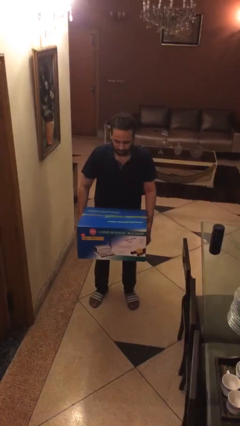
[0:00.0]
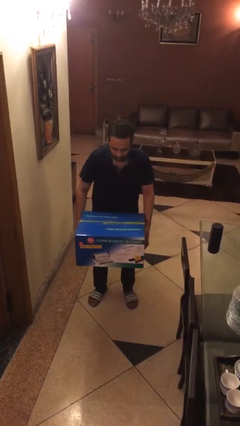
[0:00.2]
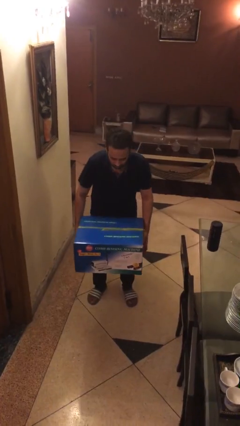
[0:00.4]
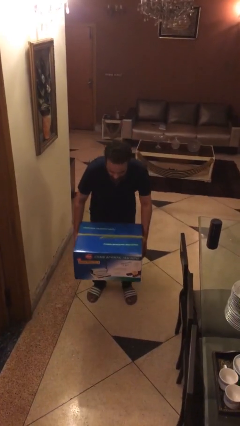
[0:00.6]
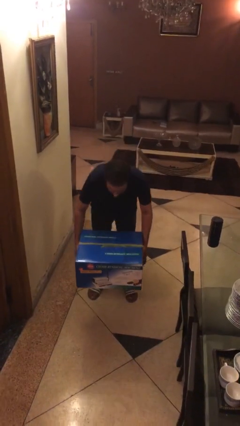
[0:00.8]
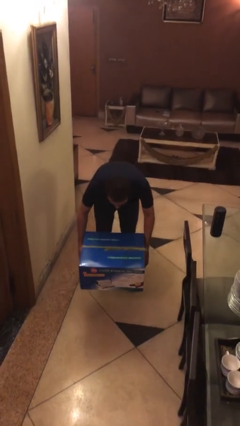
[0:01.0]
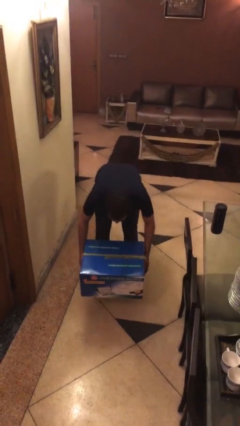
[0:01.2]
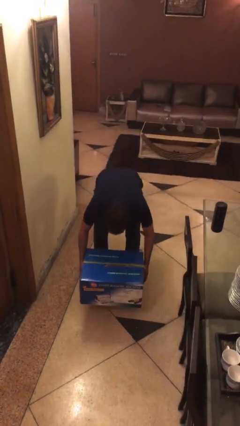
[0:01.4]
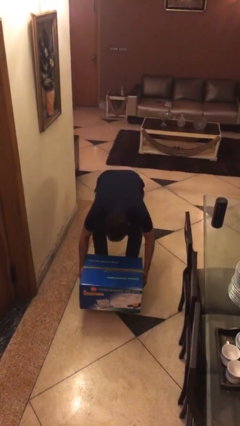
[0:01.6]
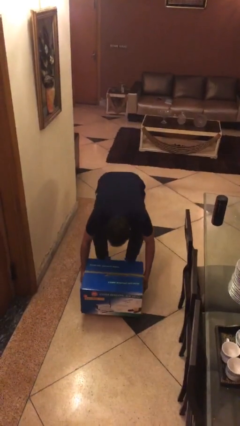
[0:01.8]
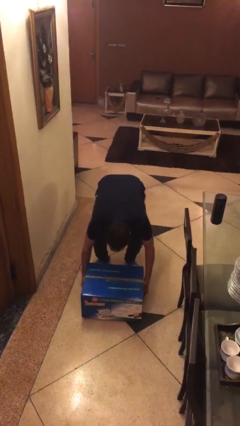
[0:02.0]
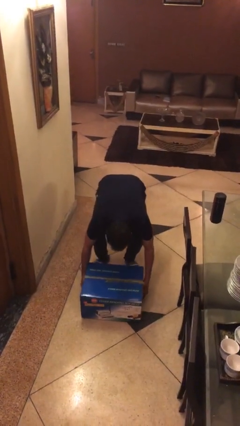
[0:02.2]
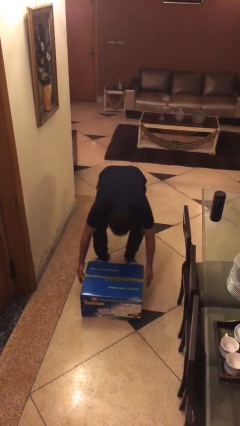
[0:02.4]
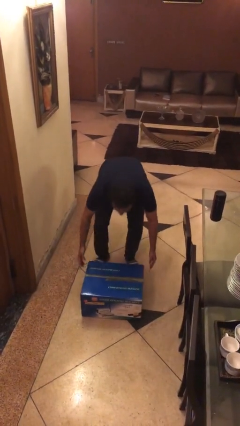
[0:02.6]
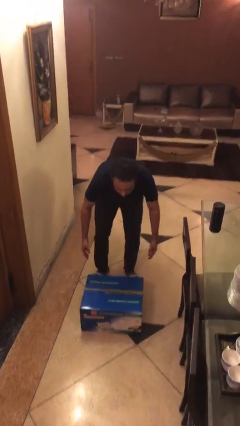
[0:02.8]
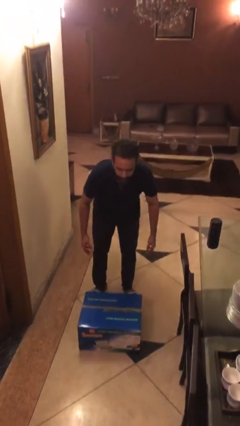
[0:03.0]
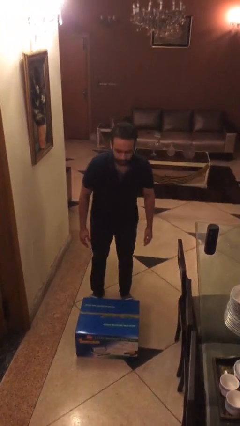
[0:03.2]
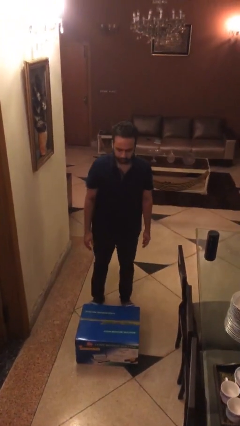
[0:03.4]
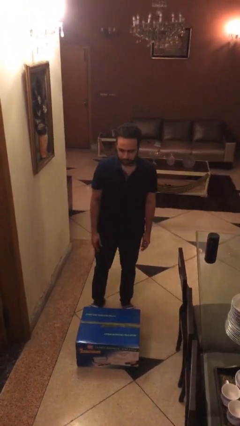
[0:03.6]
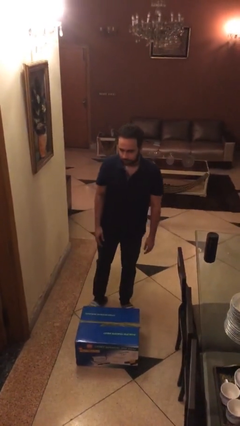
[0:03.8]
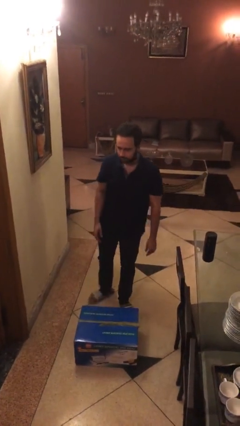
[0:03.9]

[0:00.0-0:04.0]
person puts down object on floor

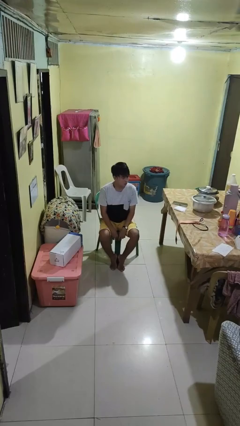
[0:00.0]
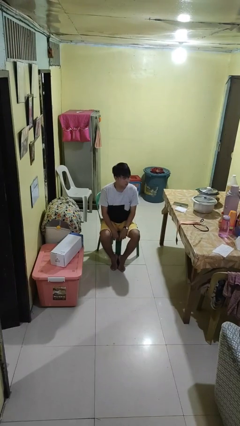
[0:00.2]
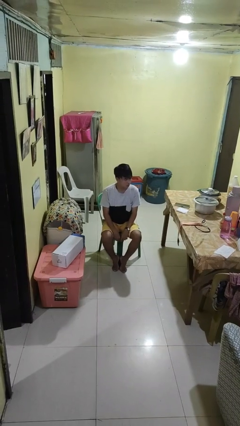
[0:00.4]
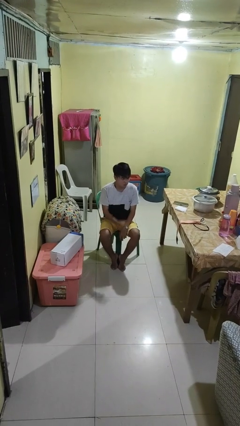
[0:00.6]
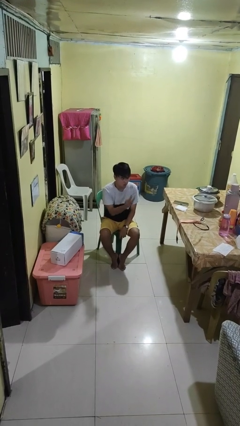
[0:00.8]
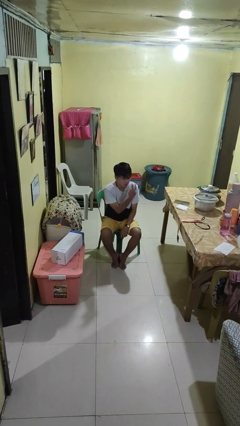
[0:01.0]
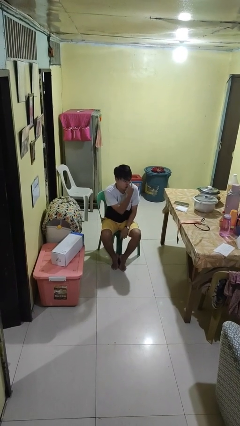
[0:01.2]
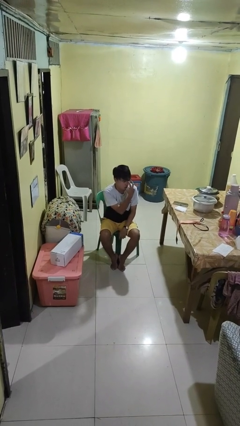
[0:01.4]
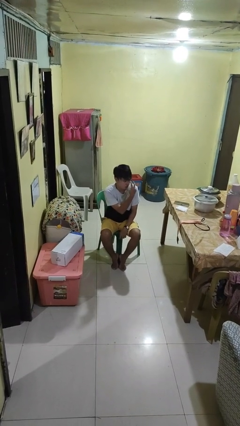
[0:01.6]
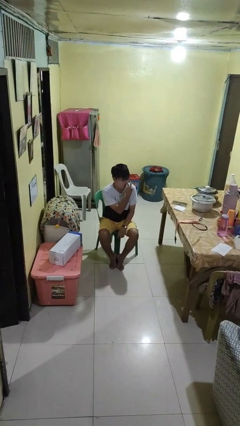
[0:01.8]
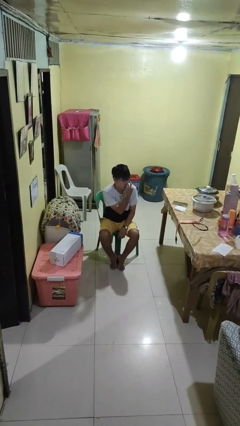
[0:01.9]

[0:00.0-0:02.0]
person gestures watch closely

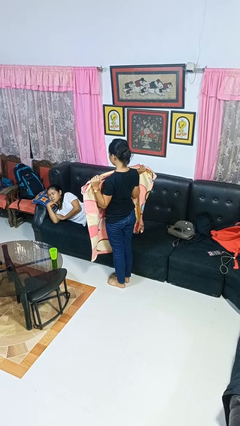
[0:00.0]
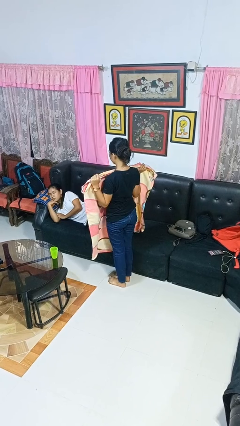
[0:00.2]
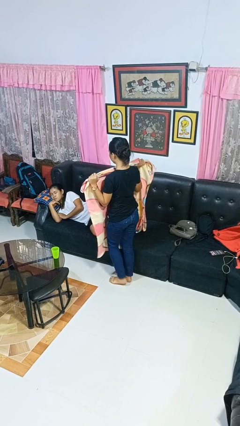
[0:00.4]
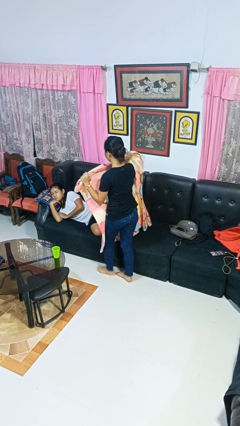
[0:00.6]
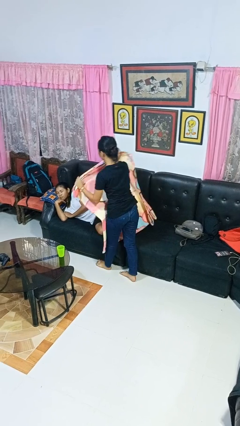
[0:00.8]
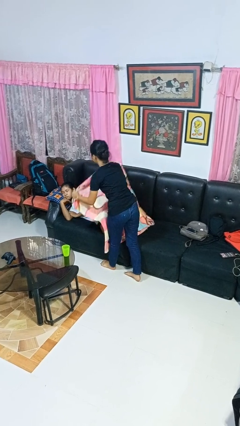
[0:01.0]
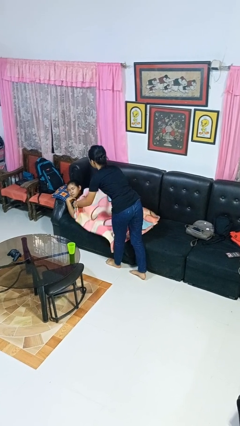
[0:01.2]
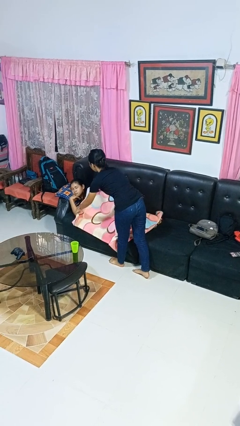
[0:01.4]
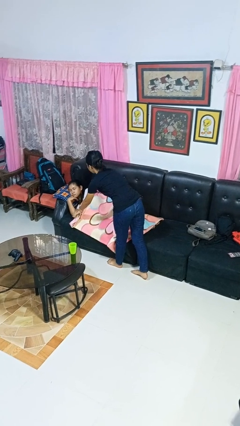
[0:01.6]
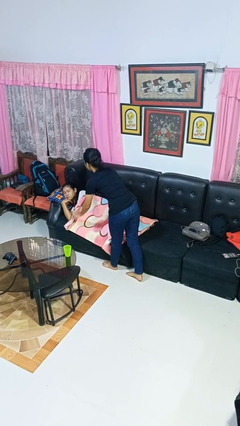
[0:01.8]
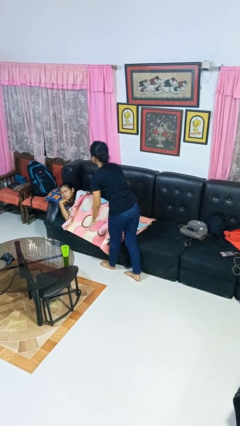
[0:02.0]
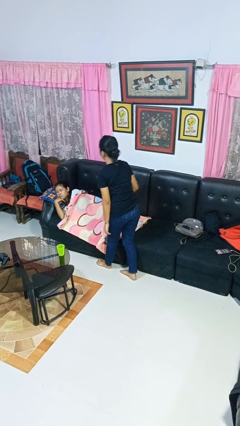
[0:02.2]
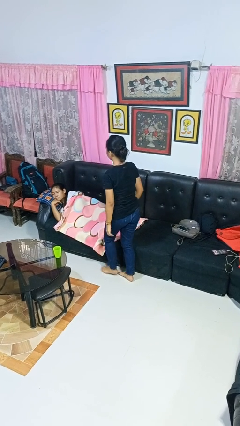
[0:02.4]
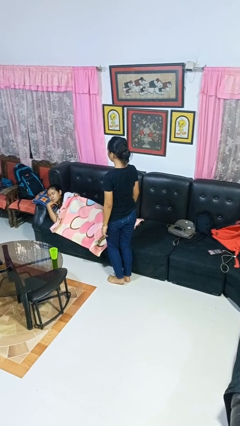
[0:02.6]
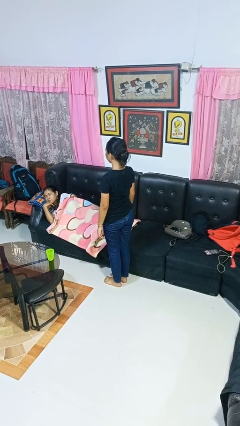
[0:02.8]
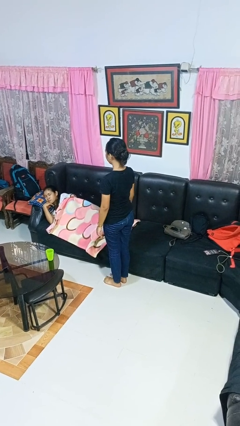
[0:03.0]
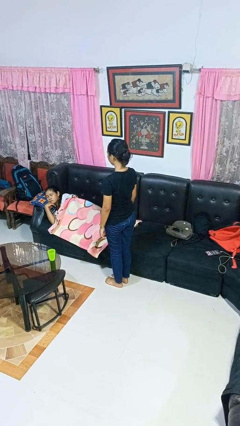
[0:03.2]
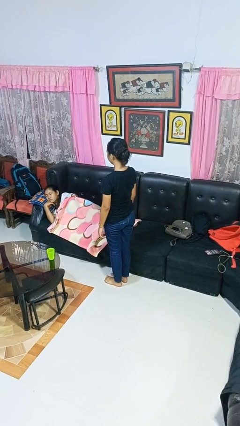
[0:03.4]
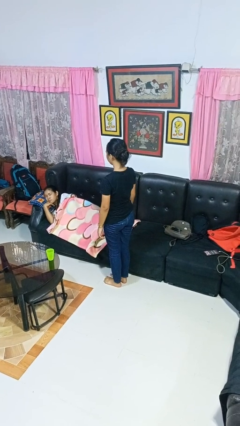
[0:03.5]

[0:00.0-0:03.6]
person covers friend with blanket

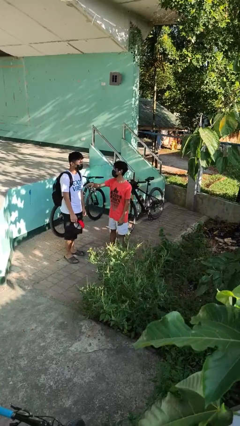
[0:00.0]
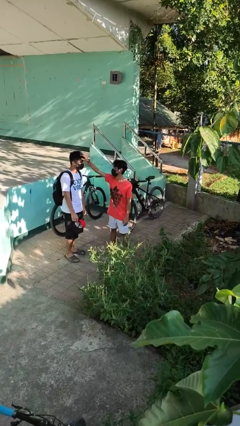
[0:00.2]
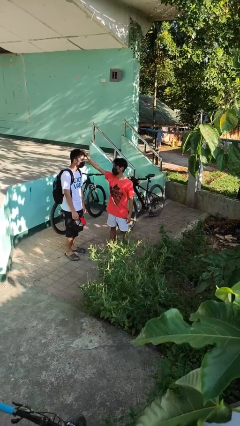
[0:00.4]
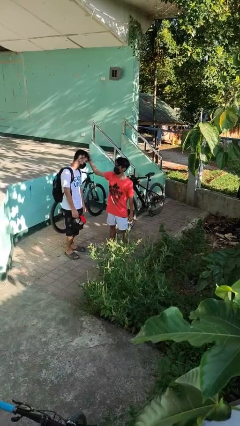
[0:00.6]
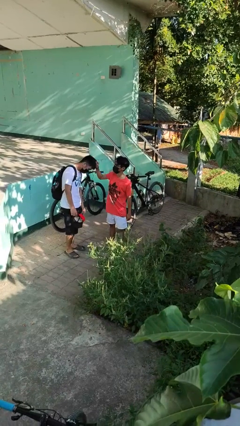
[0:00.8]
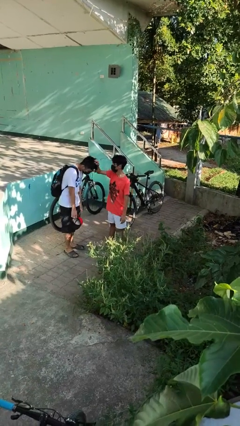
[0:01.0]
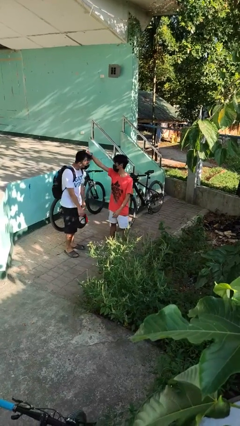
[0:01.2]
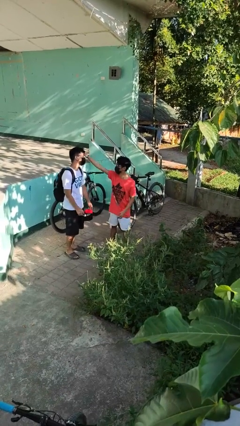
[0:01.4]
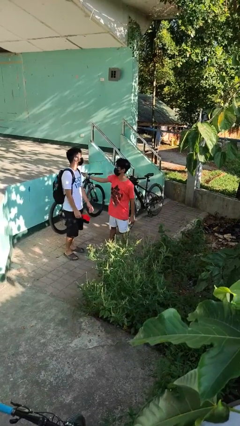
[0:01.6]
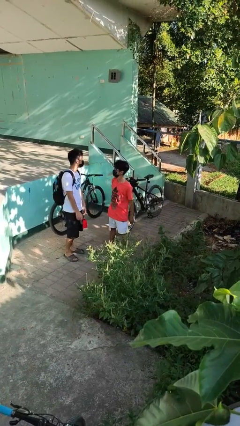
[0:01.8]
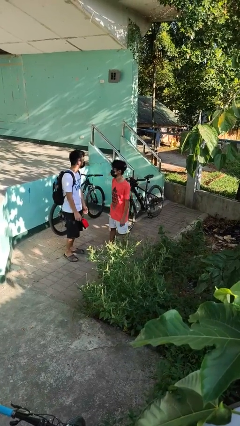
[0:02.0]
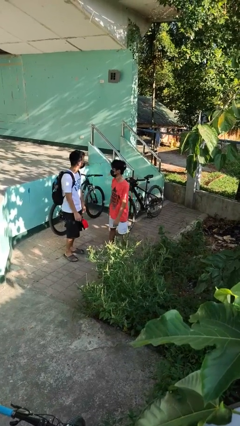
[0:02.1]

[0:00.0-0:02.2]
person grabs person by hair

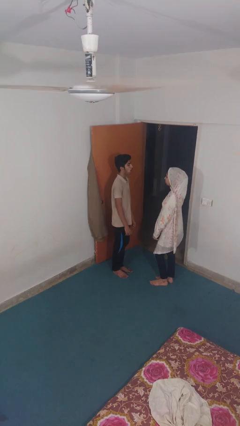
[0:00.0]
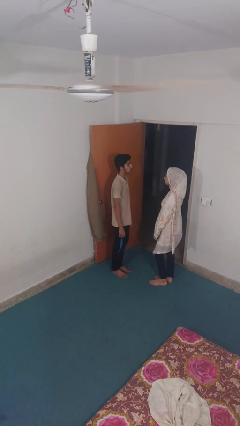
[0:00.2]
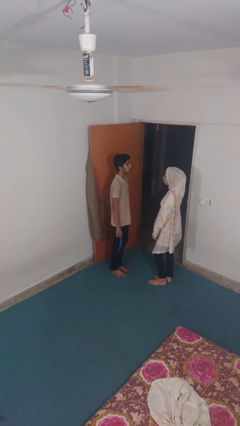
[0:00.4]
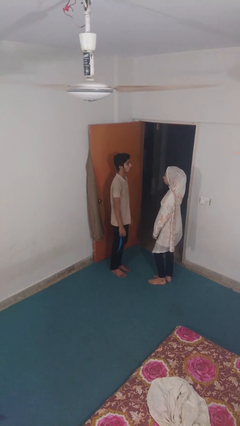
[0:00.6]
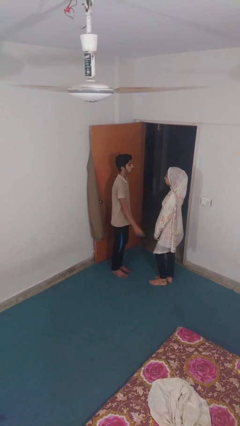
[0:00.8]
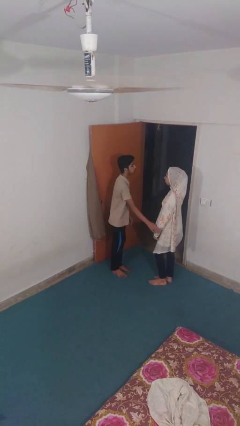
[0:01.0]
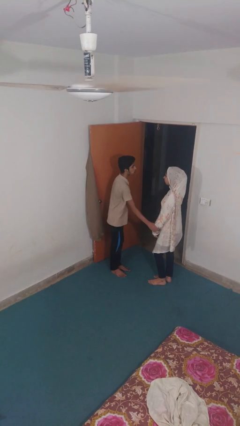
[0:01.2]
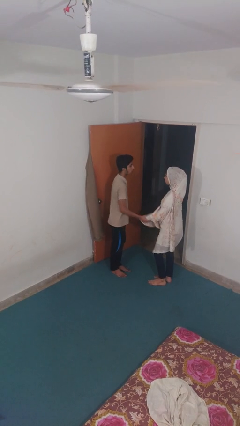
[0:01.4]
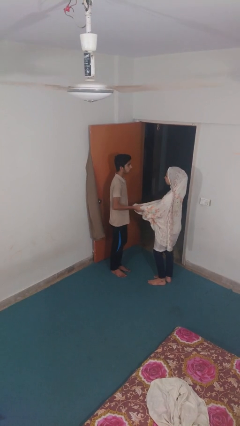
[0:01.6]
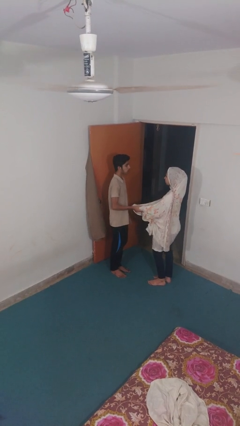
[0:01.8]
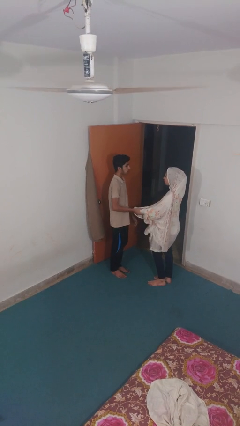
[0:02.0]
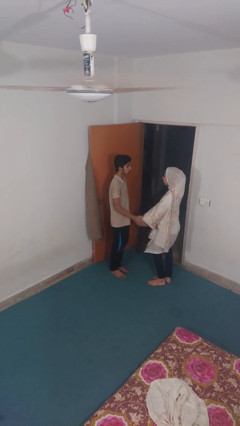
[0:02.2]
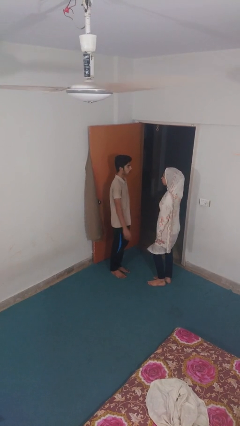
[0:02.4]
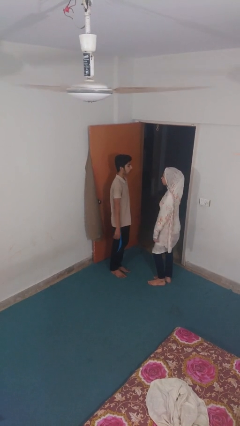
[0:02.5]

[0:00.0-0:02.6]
person grabs person by forearm

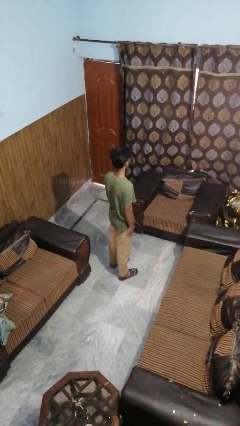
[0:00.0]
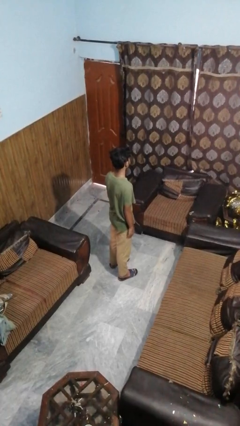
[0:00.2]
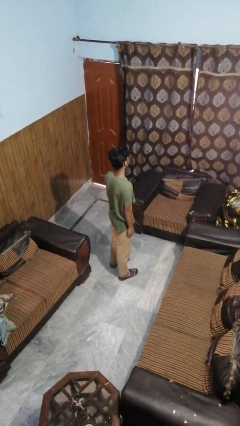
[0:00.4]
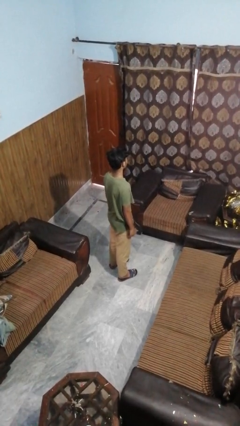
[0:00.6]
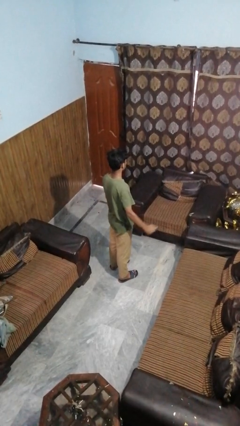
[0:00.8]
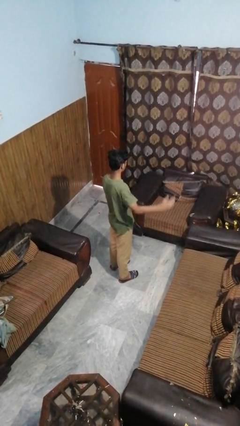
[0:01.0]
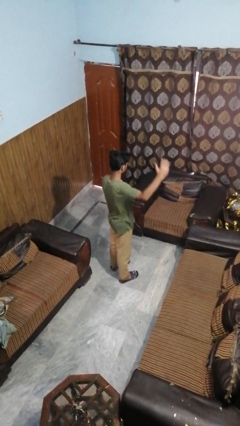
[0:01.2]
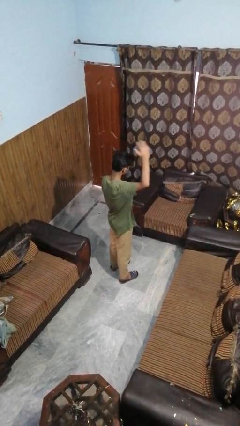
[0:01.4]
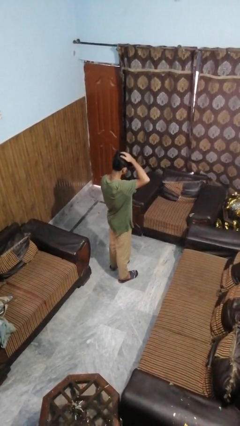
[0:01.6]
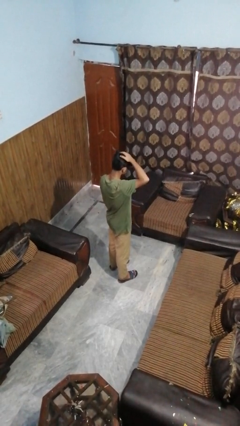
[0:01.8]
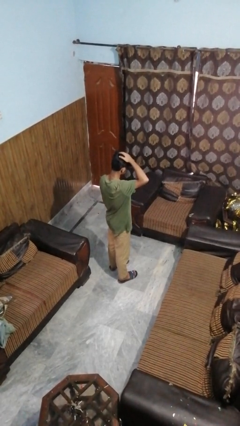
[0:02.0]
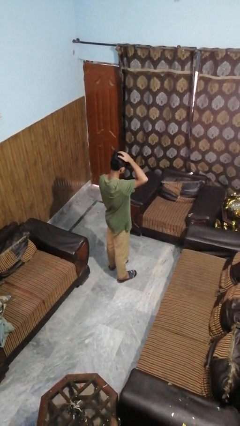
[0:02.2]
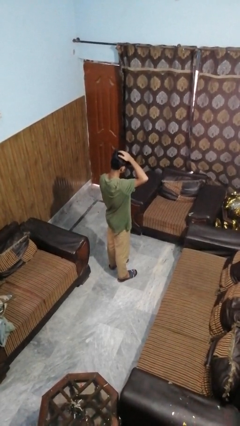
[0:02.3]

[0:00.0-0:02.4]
person pats head

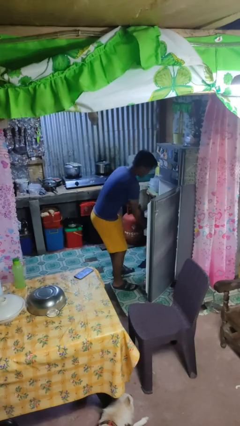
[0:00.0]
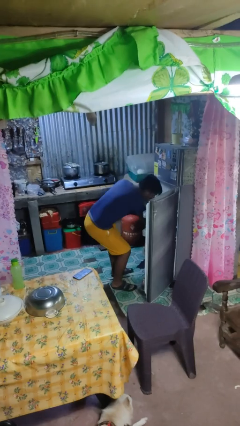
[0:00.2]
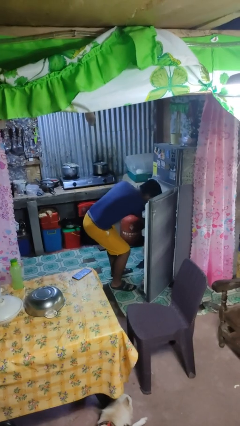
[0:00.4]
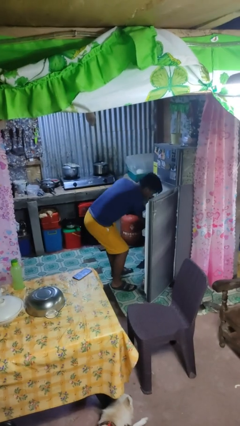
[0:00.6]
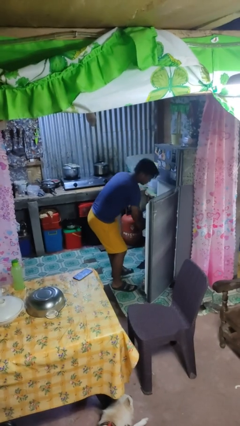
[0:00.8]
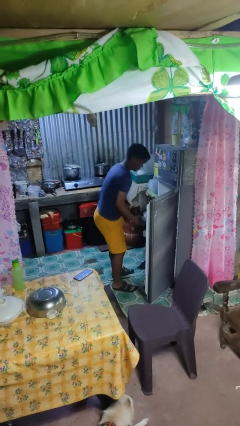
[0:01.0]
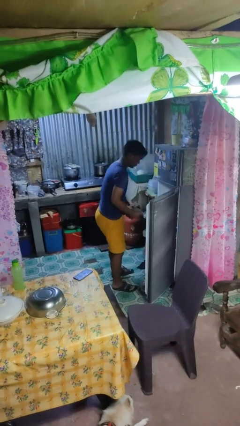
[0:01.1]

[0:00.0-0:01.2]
person takes object from refrigerator
